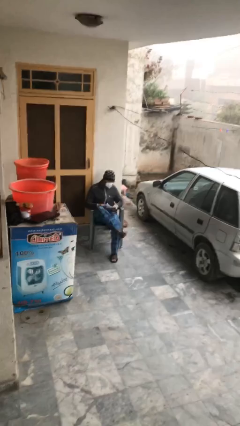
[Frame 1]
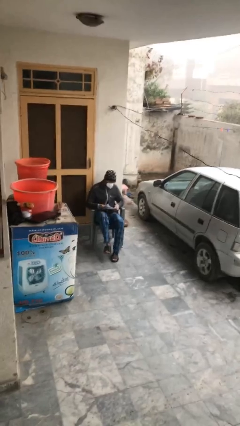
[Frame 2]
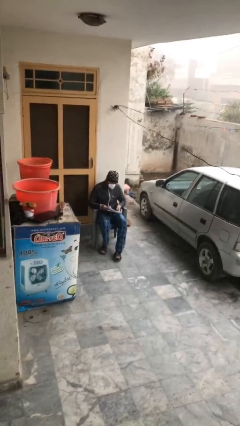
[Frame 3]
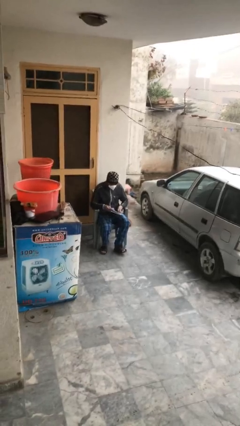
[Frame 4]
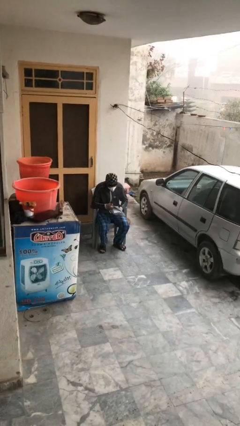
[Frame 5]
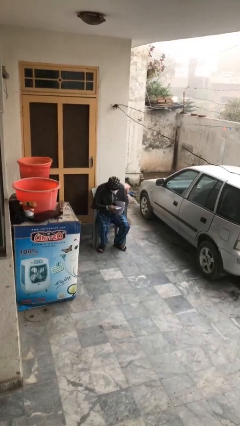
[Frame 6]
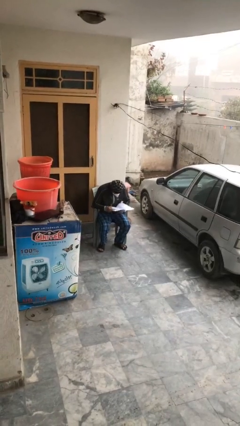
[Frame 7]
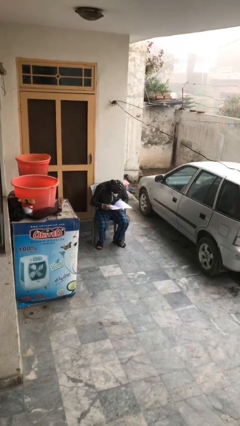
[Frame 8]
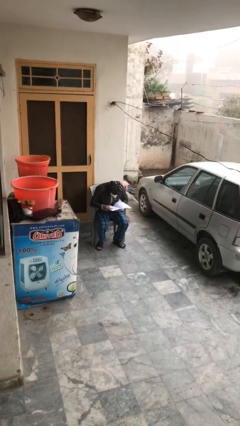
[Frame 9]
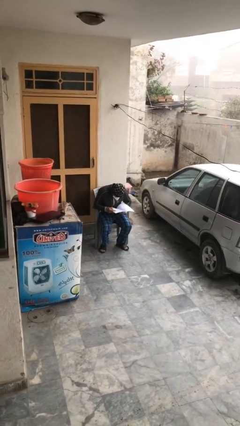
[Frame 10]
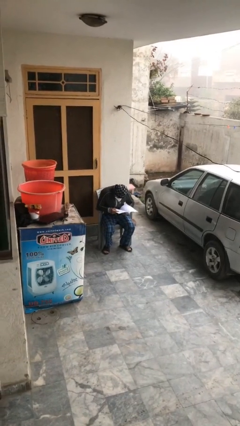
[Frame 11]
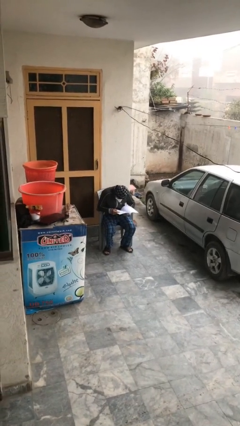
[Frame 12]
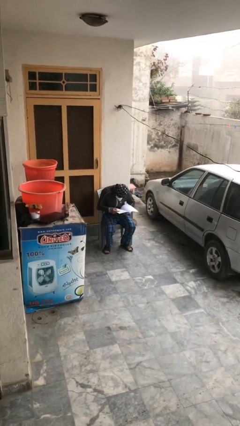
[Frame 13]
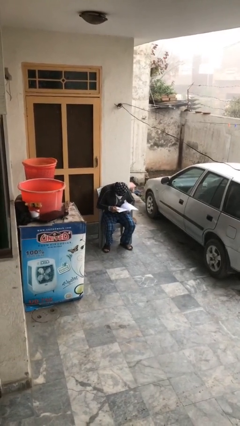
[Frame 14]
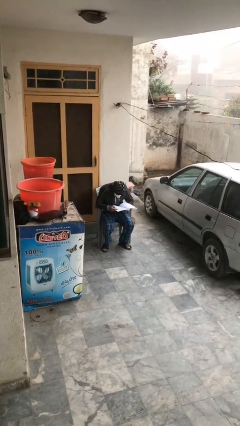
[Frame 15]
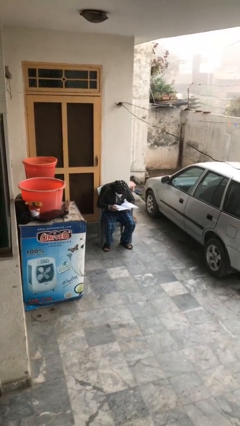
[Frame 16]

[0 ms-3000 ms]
person reads document

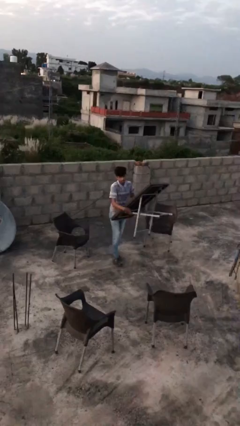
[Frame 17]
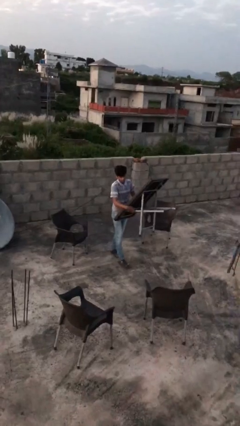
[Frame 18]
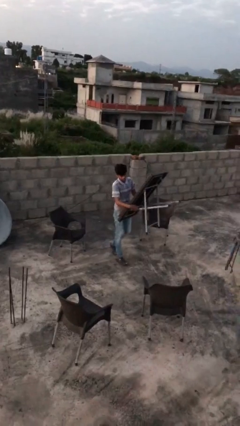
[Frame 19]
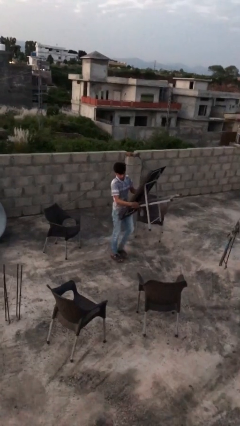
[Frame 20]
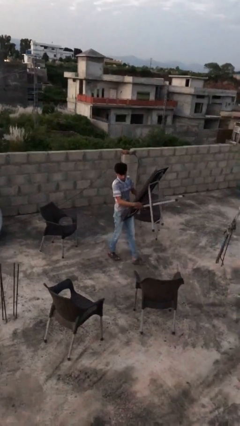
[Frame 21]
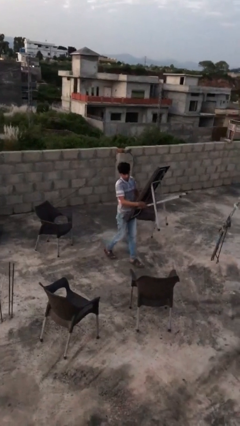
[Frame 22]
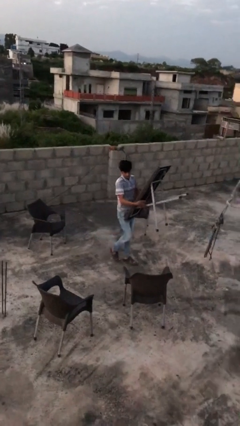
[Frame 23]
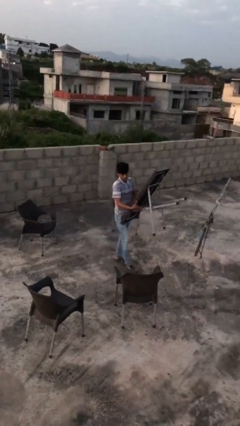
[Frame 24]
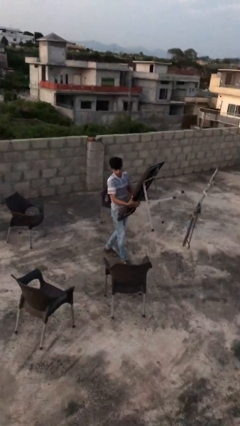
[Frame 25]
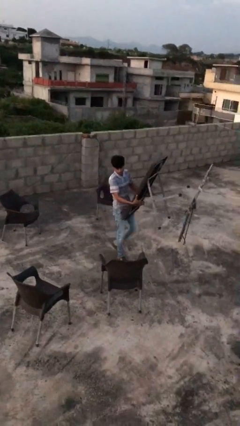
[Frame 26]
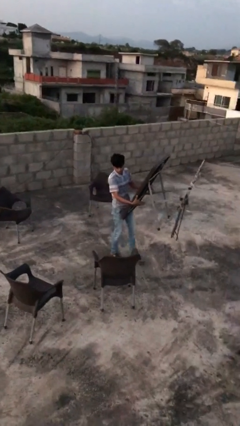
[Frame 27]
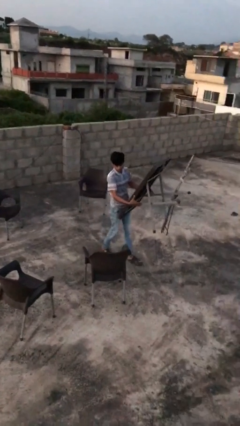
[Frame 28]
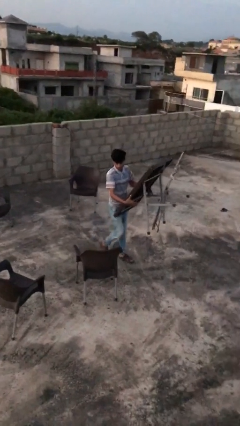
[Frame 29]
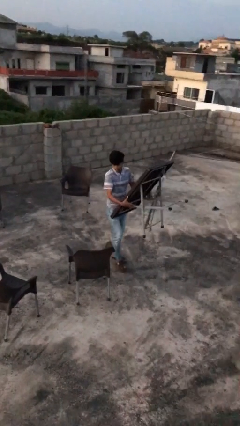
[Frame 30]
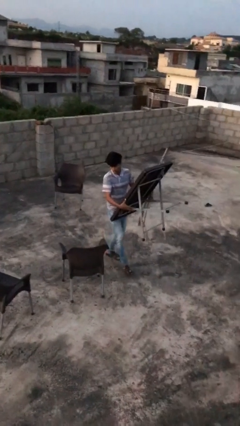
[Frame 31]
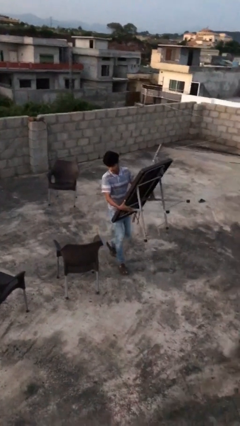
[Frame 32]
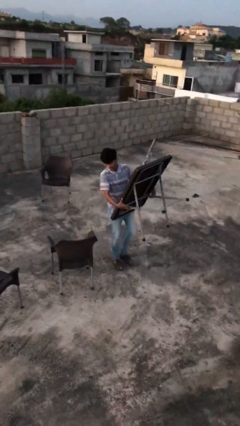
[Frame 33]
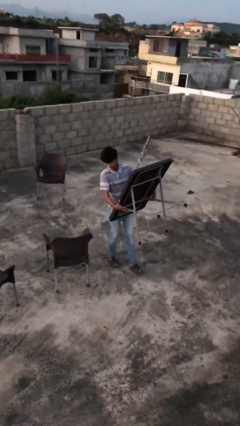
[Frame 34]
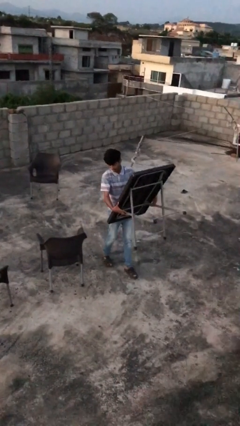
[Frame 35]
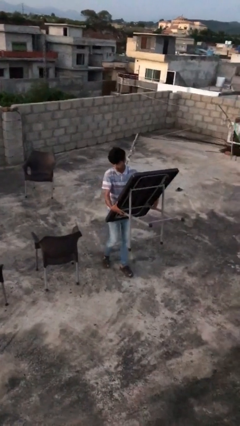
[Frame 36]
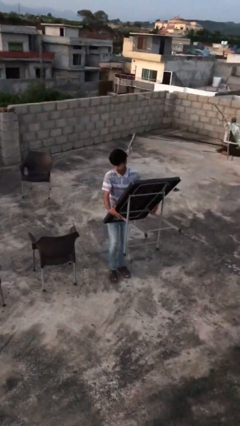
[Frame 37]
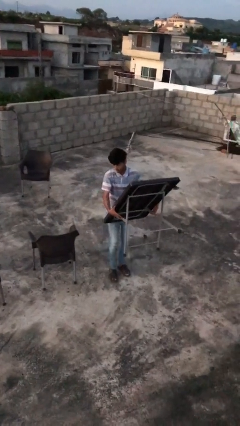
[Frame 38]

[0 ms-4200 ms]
person carries heavy object

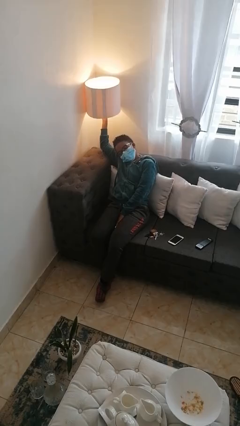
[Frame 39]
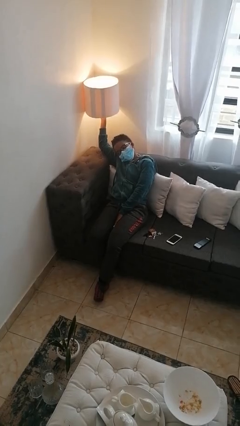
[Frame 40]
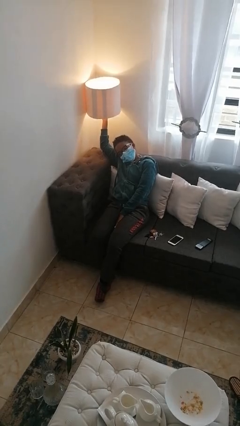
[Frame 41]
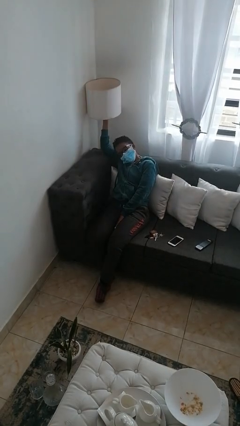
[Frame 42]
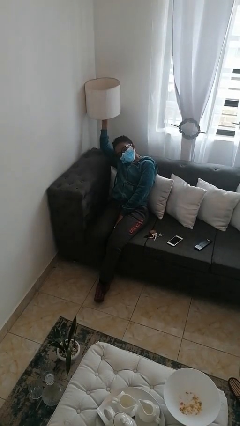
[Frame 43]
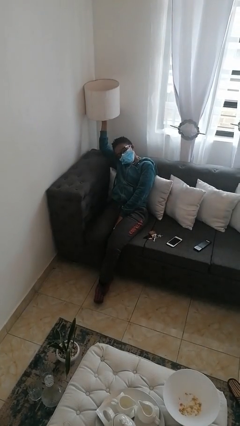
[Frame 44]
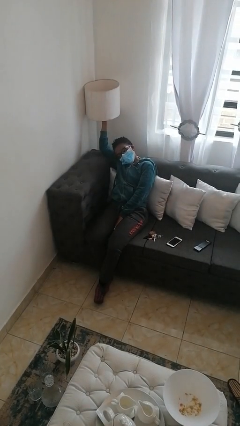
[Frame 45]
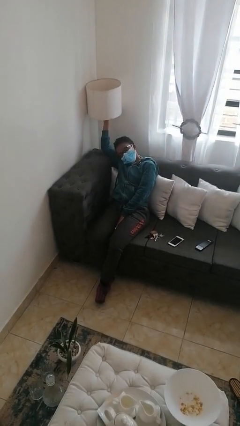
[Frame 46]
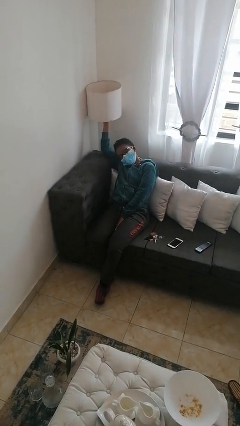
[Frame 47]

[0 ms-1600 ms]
person turns off lamp

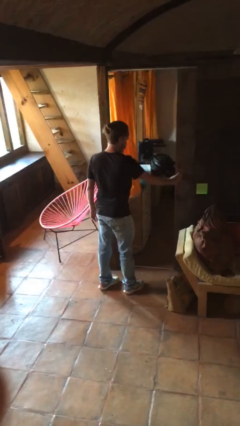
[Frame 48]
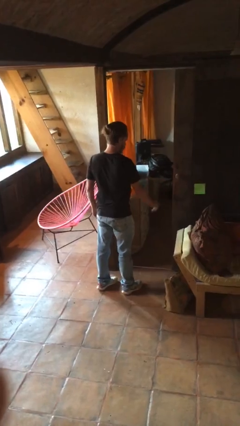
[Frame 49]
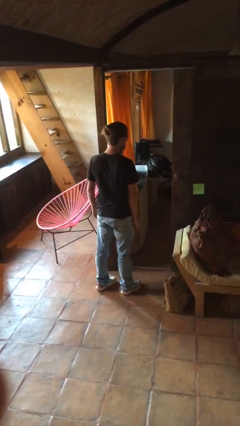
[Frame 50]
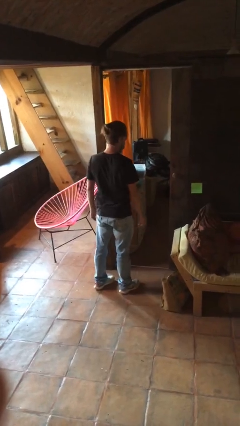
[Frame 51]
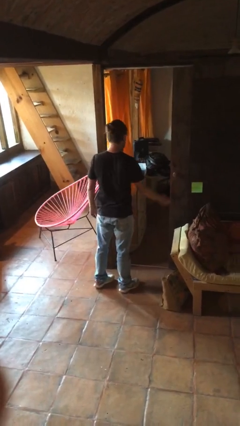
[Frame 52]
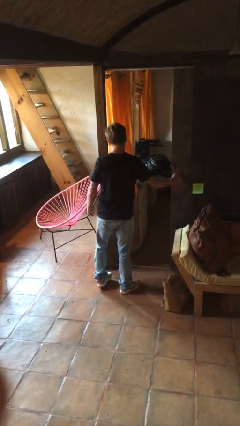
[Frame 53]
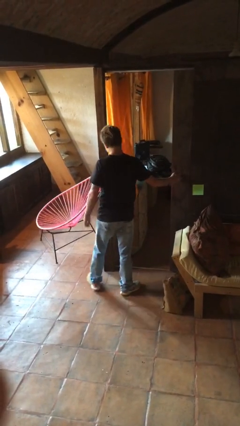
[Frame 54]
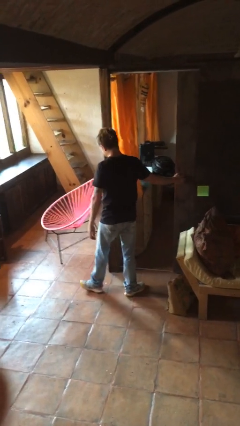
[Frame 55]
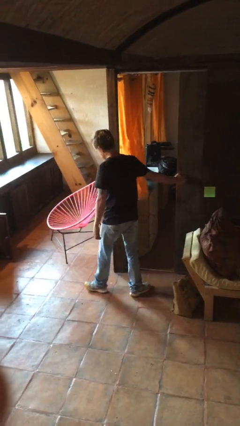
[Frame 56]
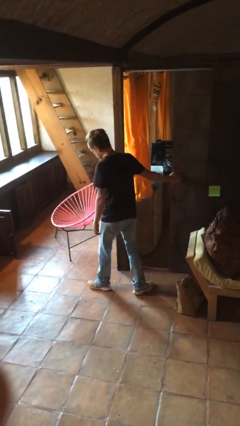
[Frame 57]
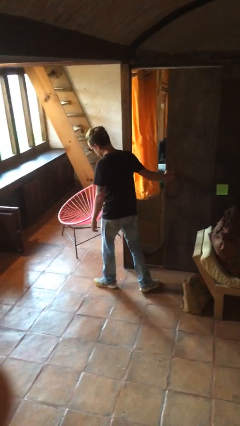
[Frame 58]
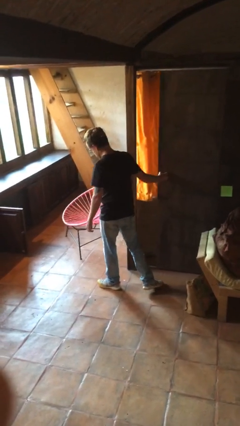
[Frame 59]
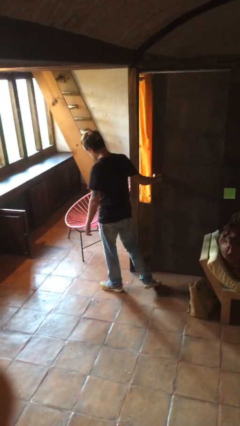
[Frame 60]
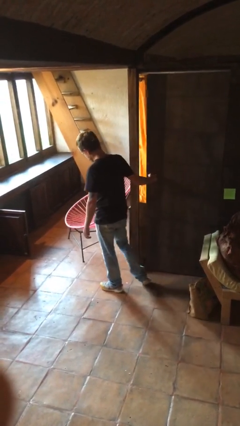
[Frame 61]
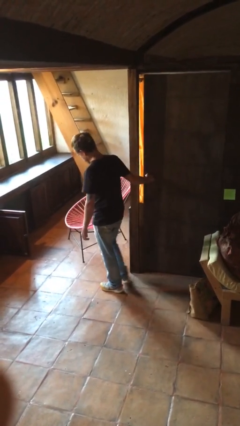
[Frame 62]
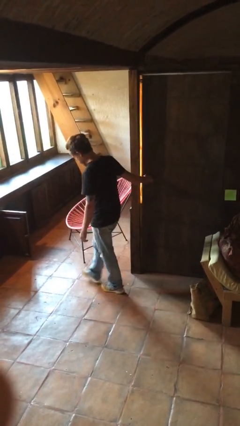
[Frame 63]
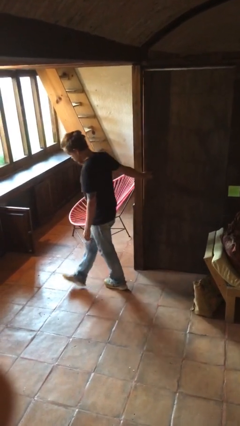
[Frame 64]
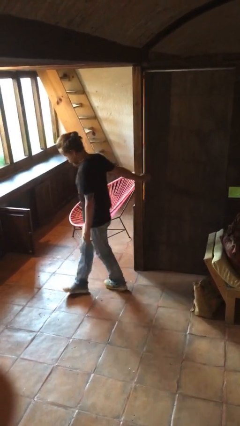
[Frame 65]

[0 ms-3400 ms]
person closes sliding door

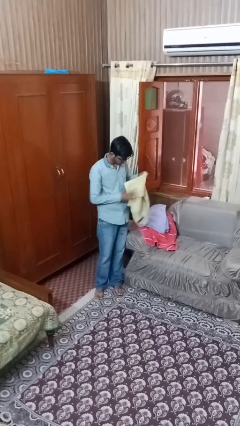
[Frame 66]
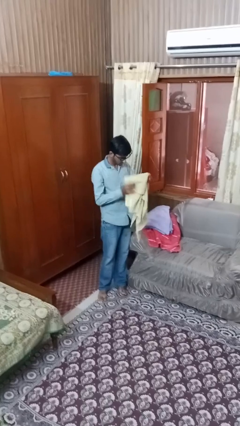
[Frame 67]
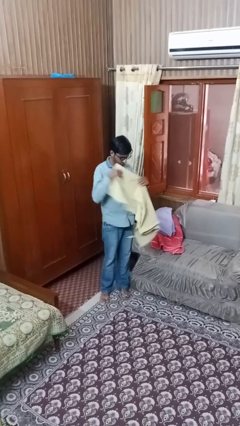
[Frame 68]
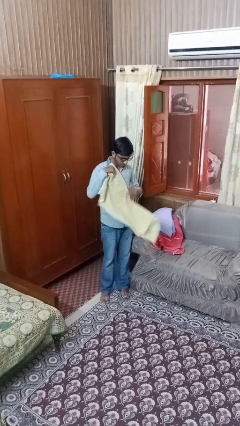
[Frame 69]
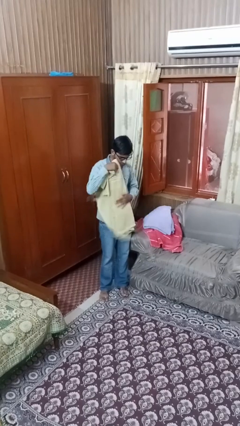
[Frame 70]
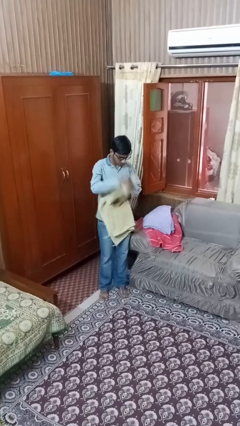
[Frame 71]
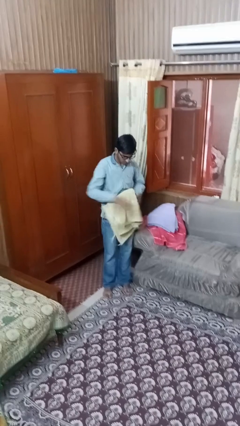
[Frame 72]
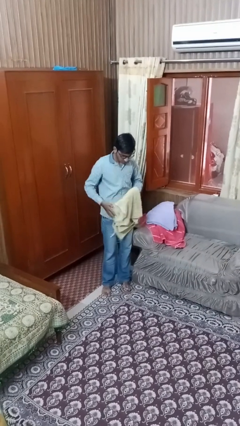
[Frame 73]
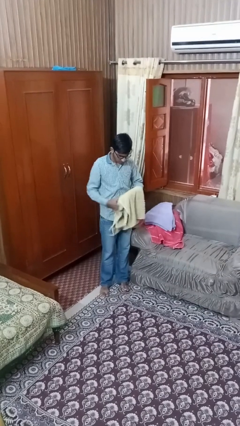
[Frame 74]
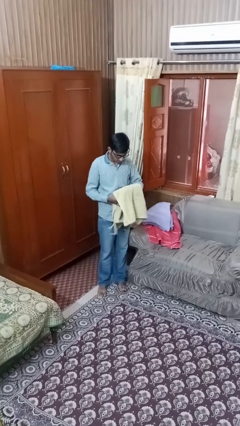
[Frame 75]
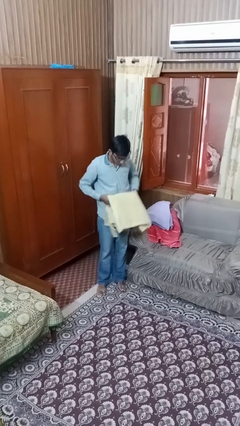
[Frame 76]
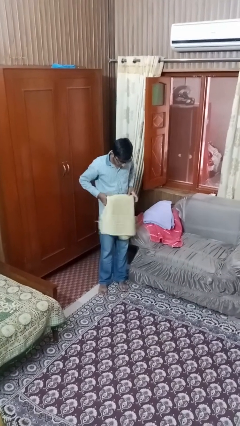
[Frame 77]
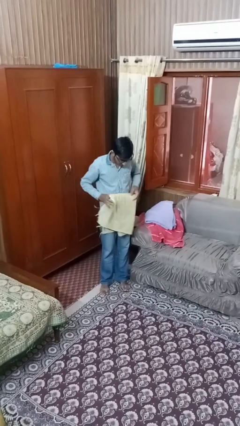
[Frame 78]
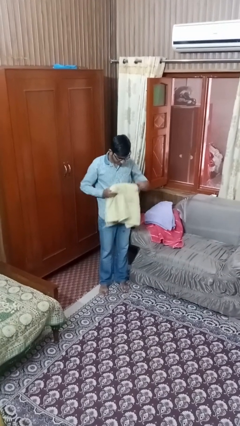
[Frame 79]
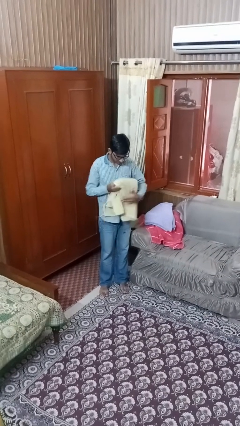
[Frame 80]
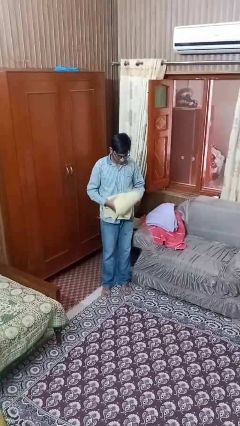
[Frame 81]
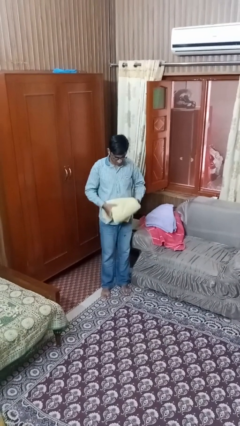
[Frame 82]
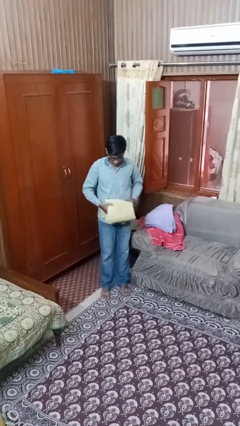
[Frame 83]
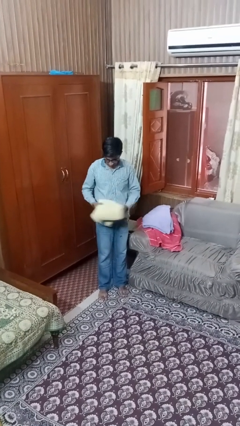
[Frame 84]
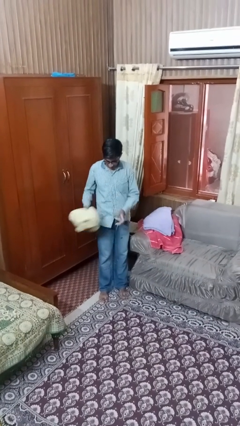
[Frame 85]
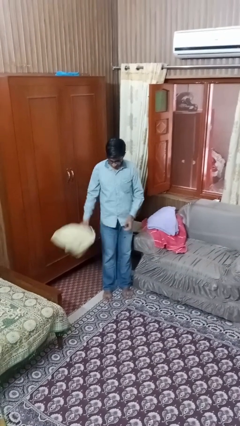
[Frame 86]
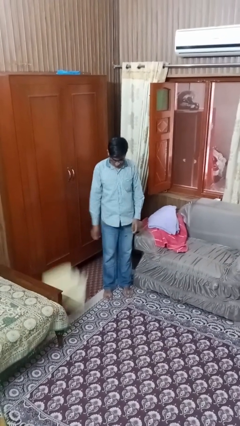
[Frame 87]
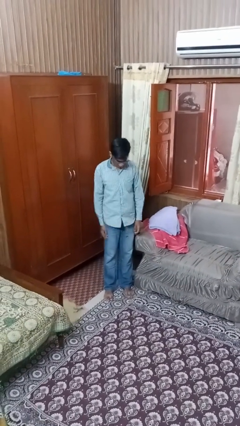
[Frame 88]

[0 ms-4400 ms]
person folds towel

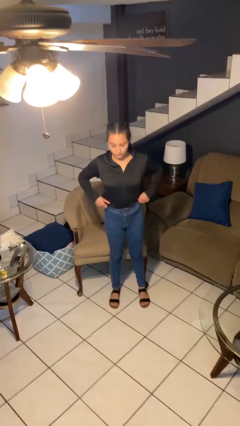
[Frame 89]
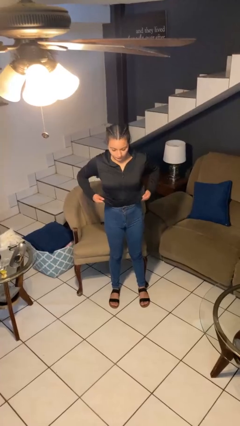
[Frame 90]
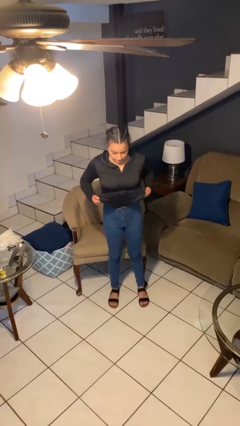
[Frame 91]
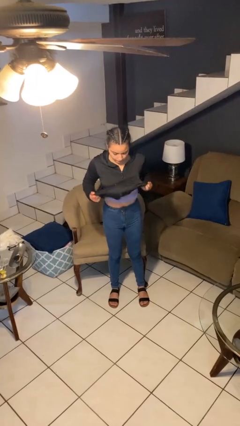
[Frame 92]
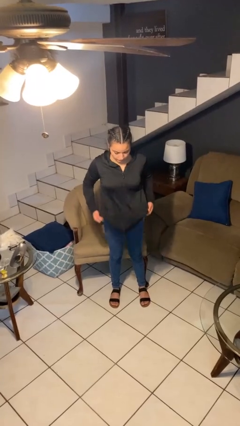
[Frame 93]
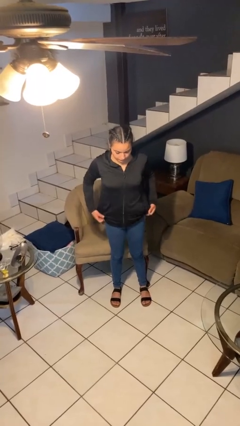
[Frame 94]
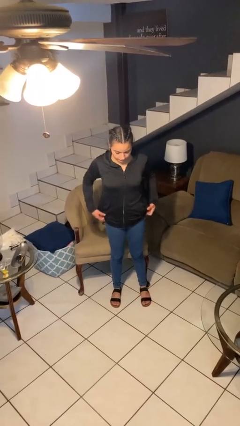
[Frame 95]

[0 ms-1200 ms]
person untucks shirt
